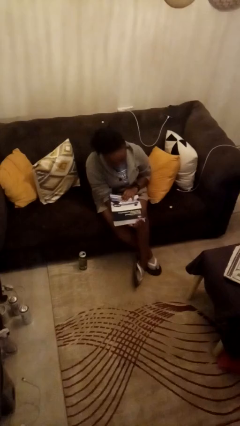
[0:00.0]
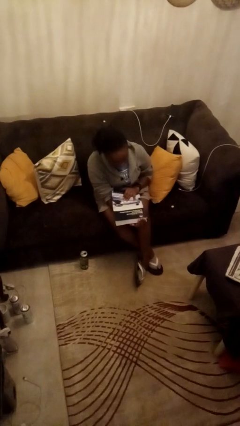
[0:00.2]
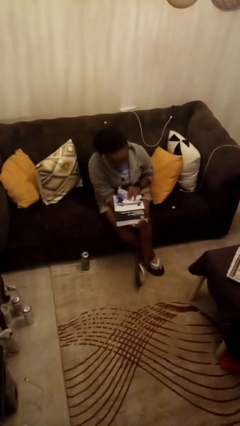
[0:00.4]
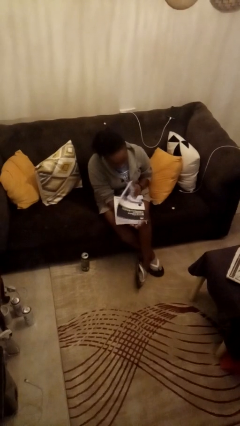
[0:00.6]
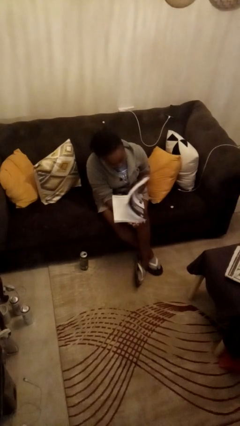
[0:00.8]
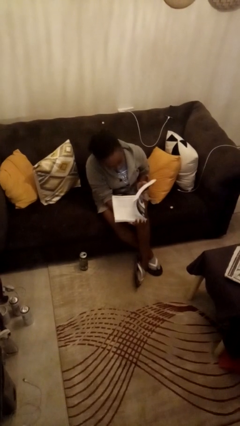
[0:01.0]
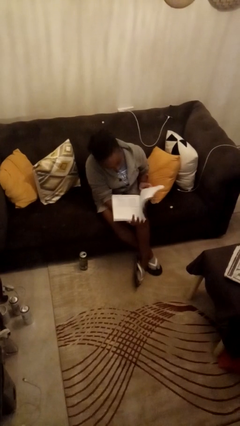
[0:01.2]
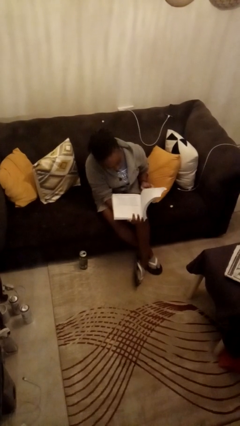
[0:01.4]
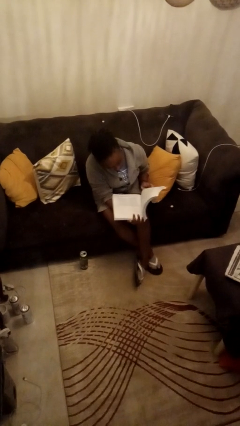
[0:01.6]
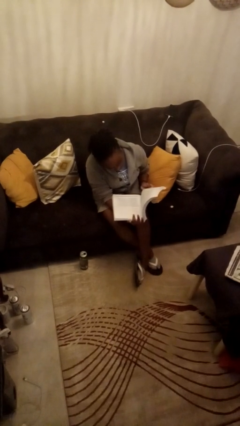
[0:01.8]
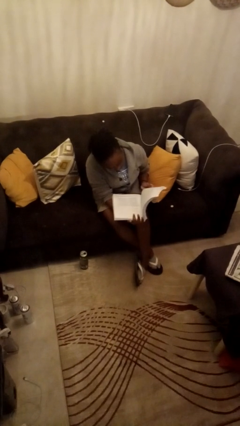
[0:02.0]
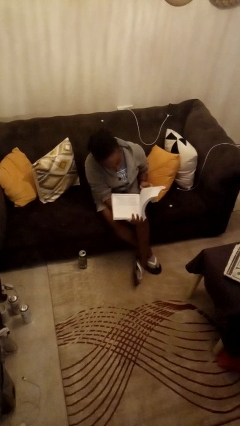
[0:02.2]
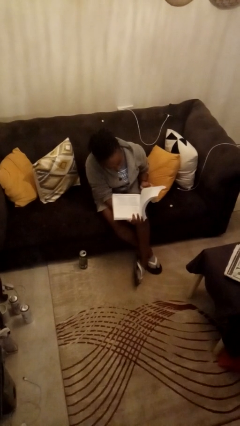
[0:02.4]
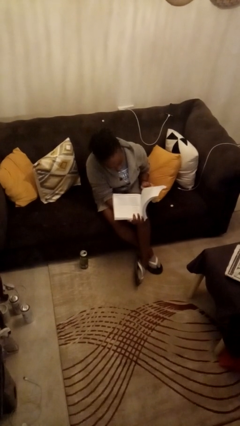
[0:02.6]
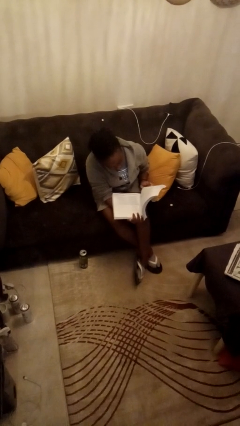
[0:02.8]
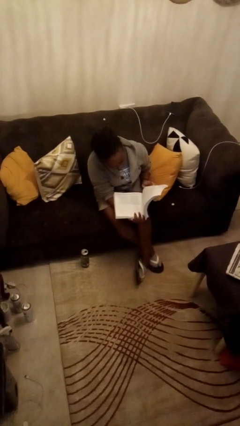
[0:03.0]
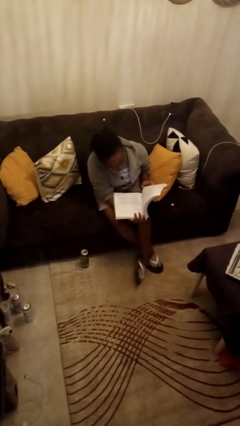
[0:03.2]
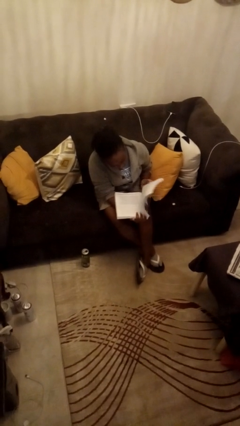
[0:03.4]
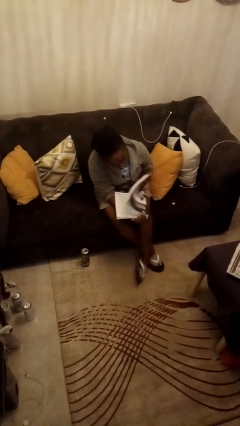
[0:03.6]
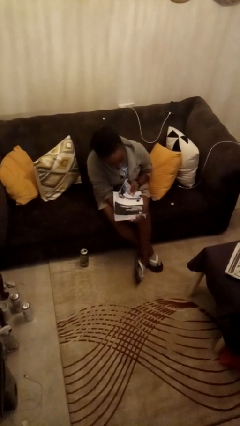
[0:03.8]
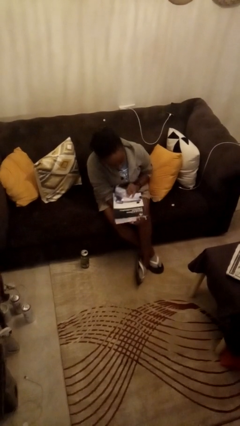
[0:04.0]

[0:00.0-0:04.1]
person reads book

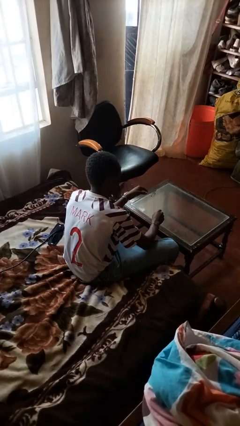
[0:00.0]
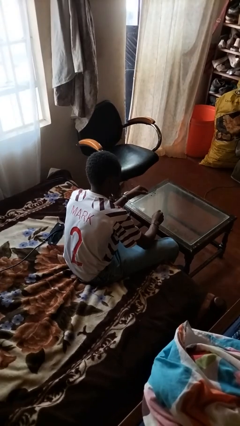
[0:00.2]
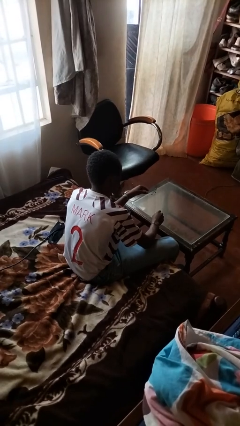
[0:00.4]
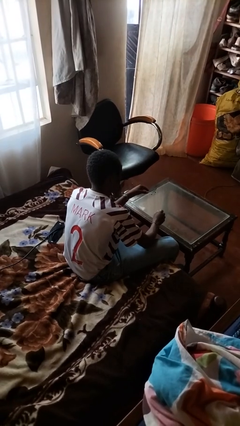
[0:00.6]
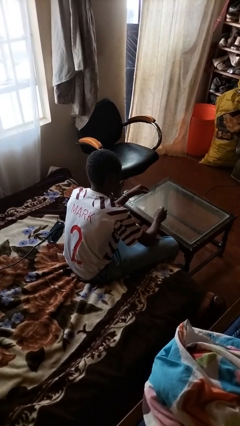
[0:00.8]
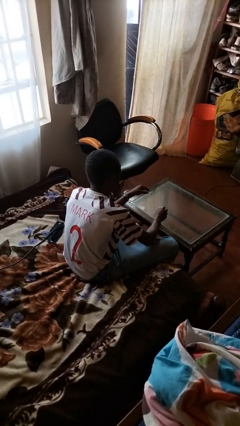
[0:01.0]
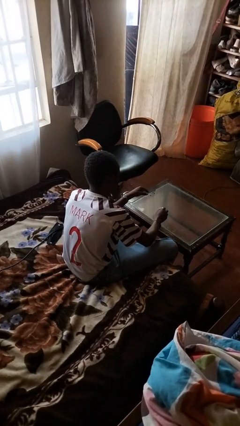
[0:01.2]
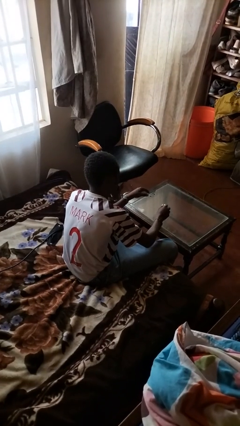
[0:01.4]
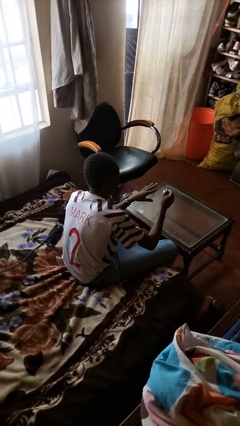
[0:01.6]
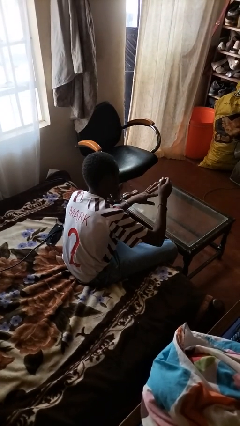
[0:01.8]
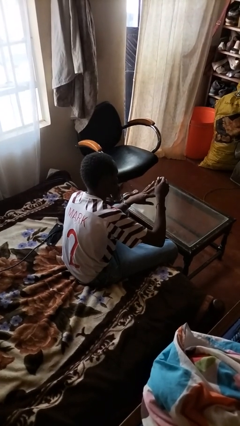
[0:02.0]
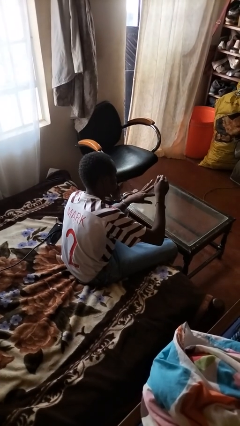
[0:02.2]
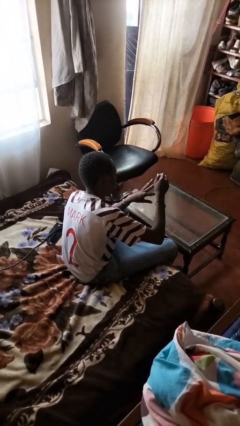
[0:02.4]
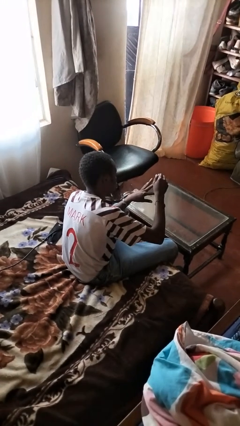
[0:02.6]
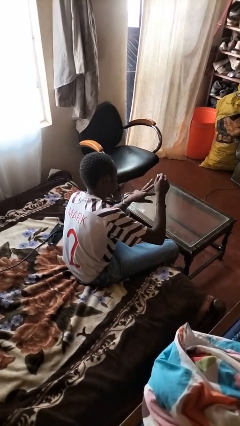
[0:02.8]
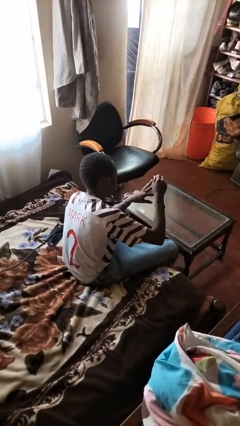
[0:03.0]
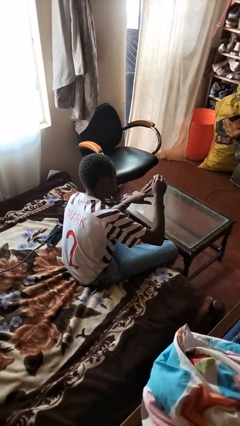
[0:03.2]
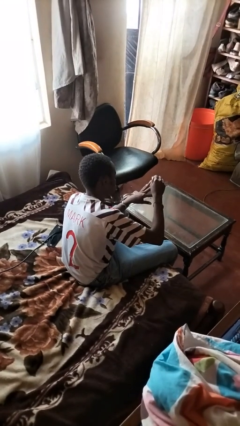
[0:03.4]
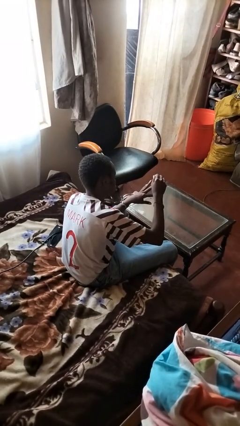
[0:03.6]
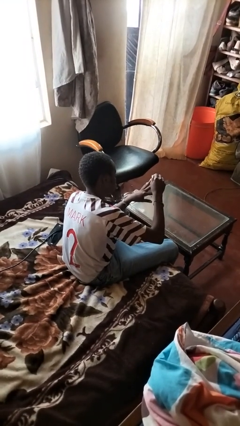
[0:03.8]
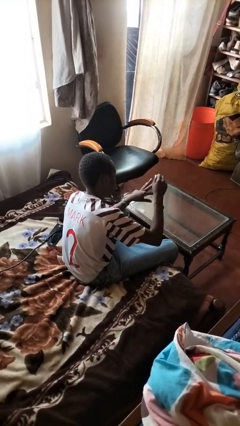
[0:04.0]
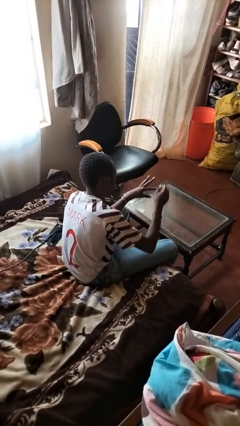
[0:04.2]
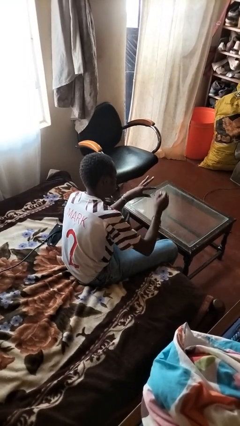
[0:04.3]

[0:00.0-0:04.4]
person paints fingernails

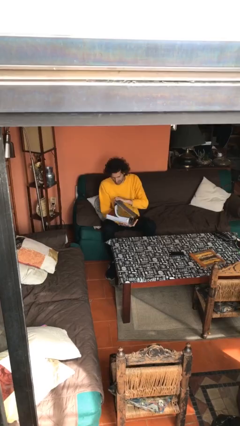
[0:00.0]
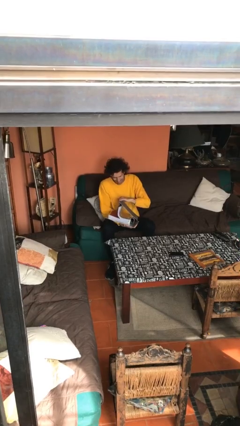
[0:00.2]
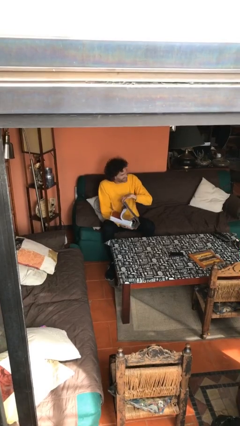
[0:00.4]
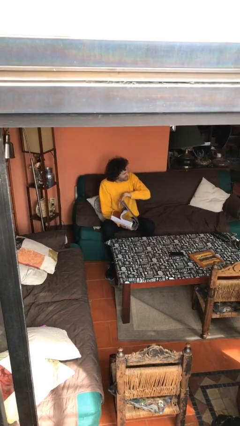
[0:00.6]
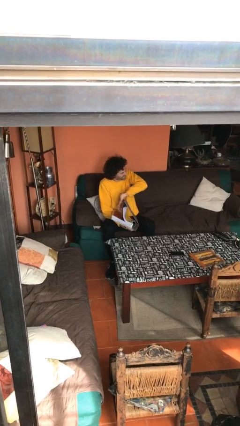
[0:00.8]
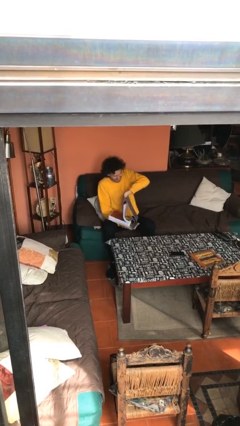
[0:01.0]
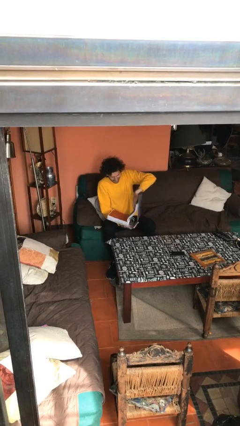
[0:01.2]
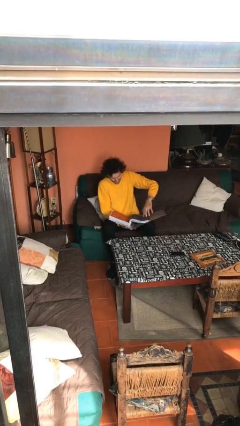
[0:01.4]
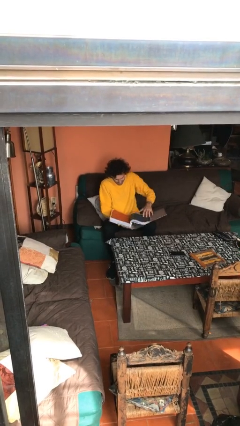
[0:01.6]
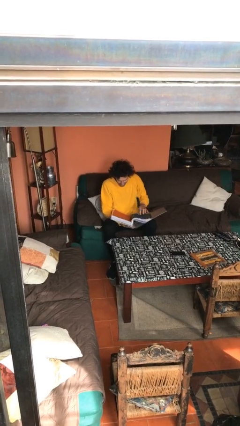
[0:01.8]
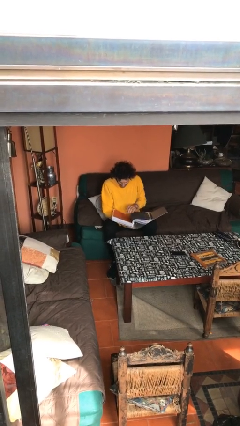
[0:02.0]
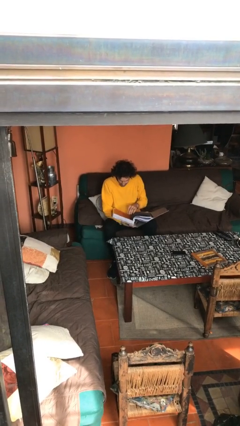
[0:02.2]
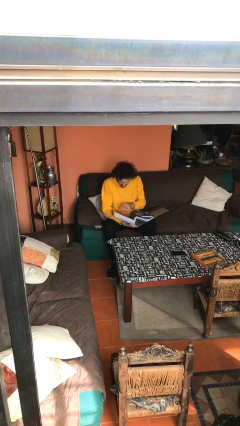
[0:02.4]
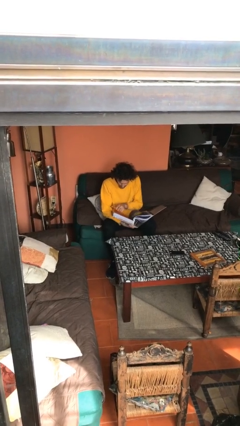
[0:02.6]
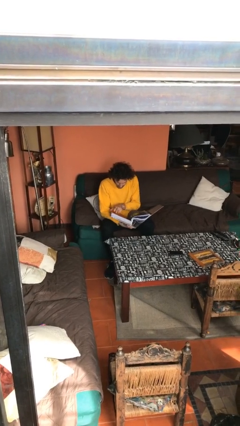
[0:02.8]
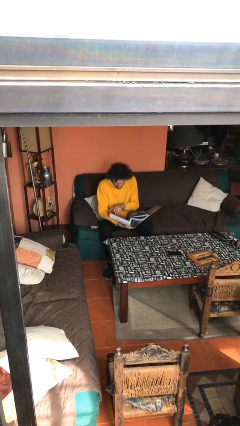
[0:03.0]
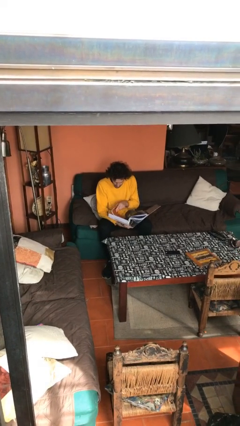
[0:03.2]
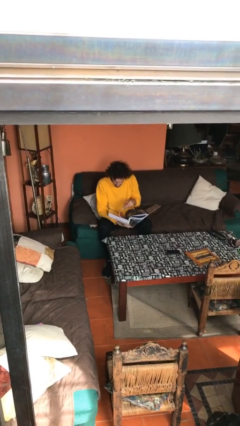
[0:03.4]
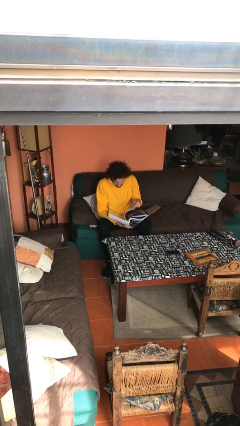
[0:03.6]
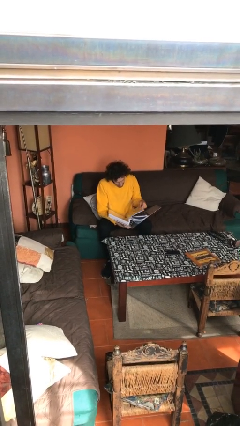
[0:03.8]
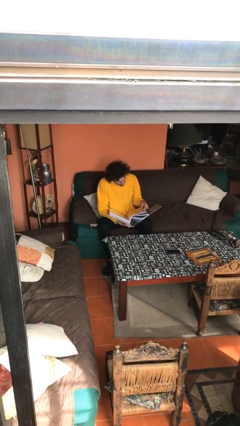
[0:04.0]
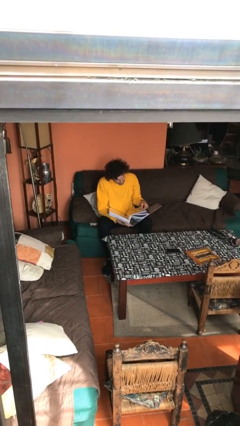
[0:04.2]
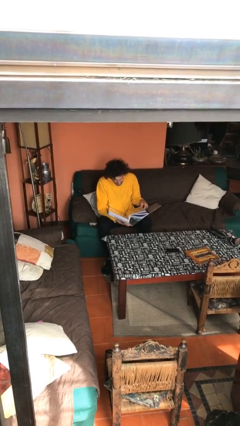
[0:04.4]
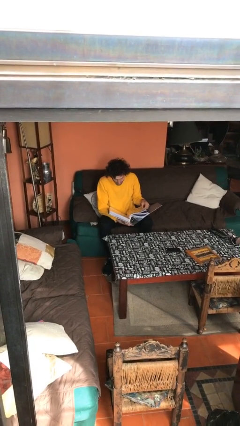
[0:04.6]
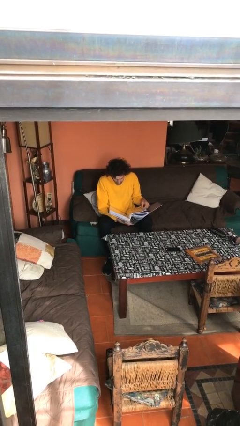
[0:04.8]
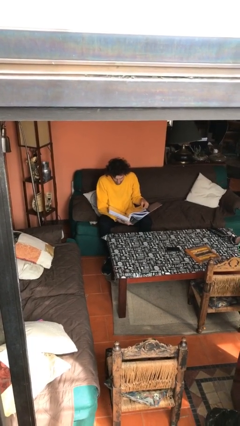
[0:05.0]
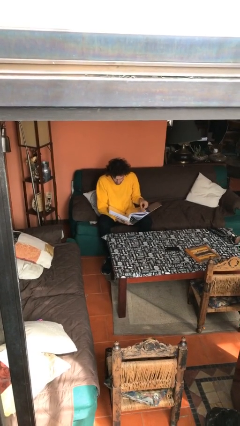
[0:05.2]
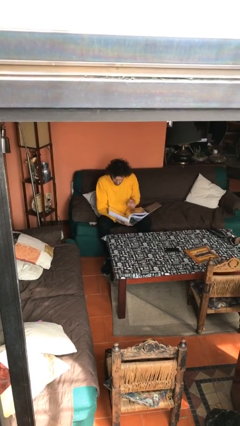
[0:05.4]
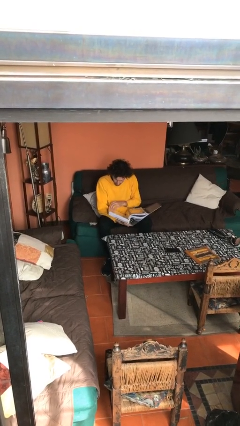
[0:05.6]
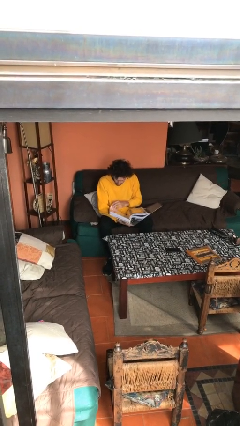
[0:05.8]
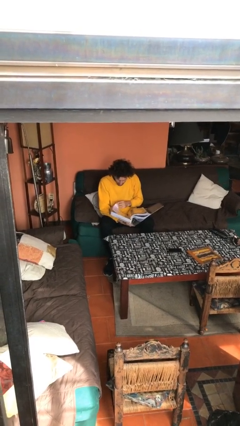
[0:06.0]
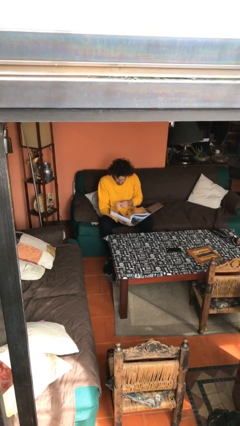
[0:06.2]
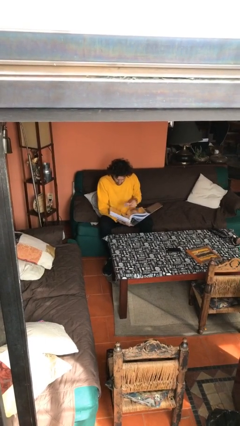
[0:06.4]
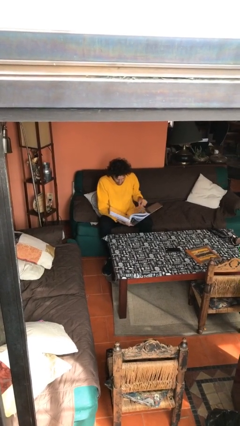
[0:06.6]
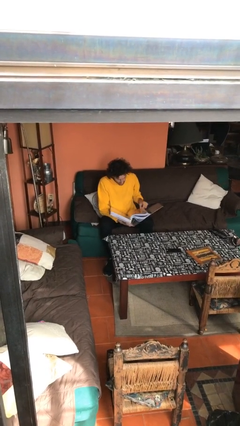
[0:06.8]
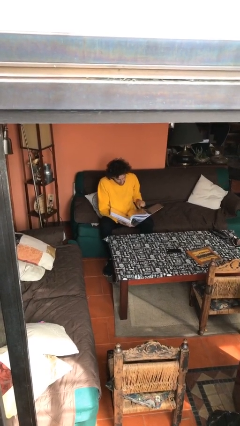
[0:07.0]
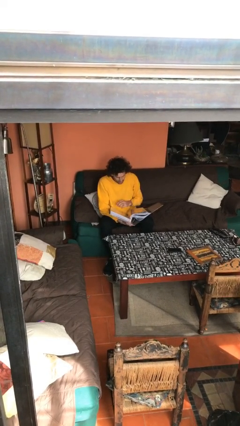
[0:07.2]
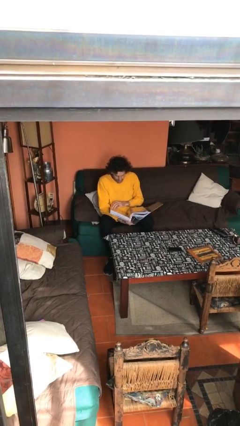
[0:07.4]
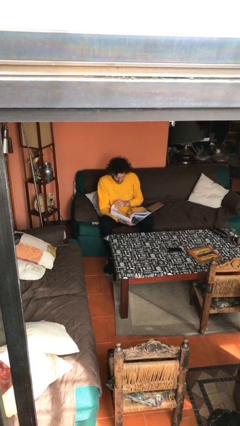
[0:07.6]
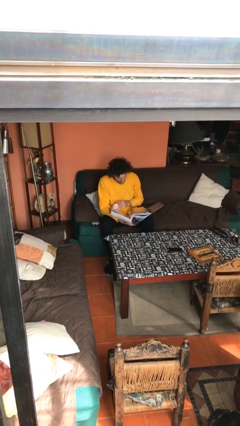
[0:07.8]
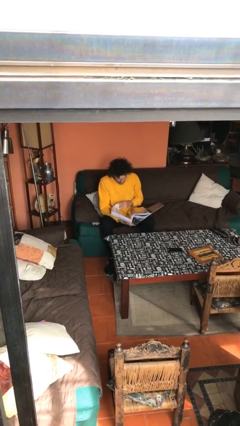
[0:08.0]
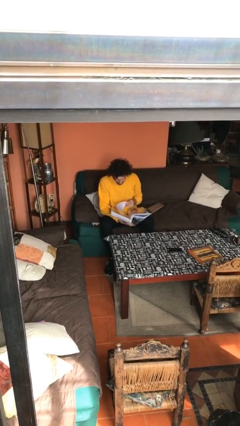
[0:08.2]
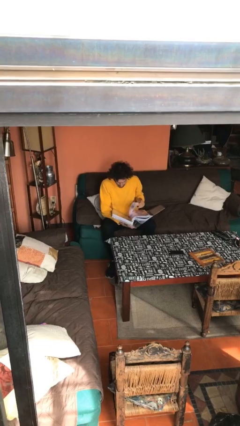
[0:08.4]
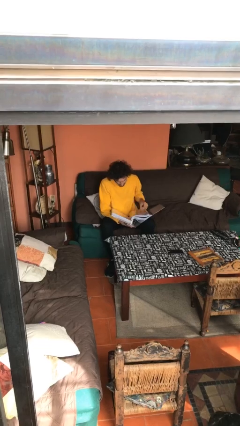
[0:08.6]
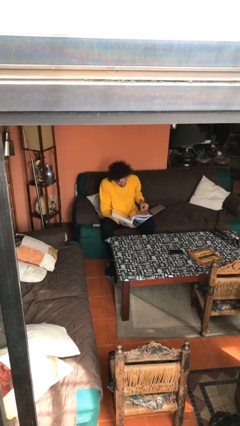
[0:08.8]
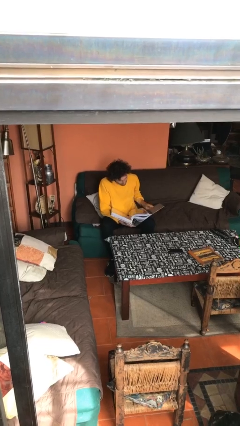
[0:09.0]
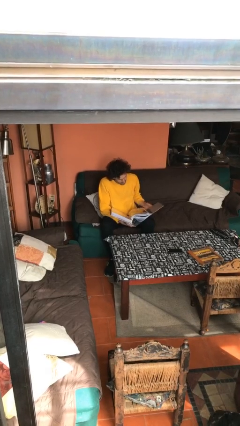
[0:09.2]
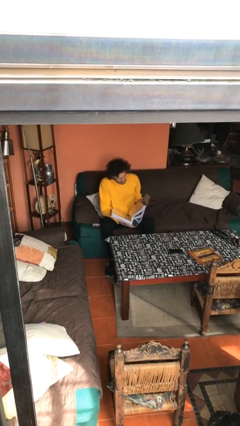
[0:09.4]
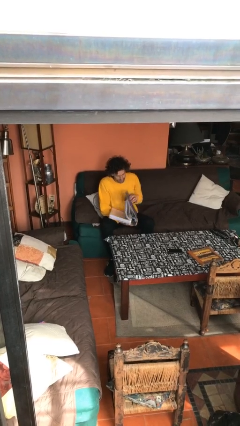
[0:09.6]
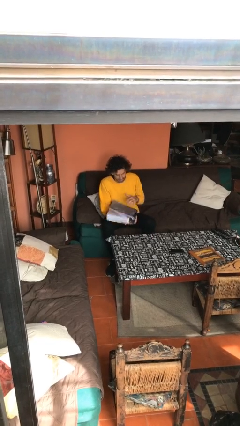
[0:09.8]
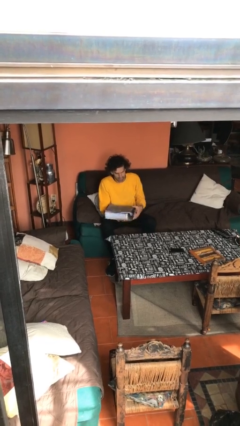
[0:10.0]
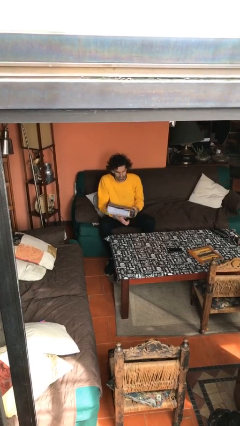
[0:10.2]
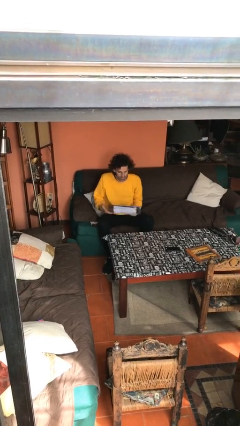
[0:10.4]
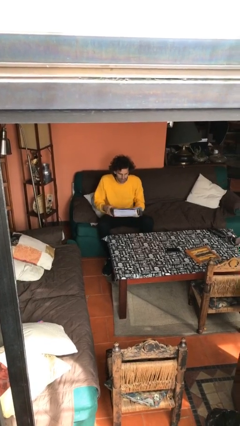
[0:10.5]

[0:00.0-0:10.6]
person reads document
